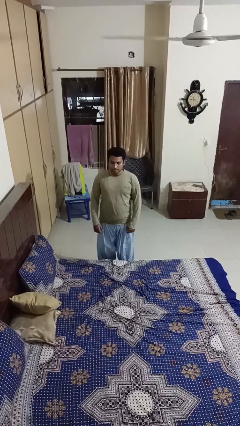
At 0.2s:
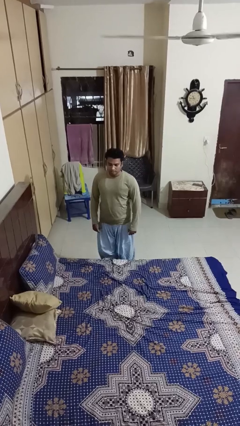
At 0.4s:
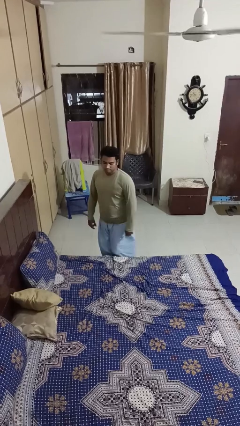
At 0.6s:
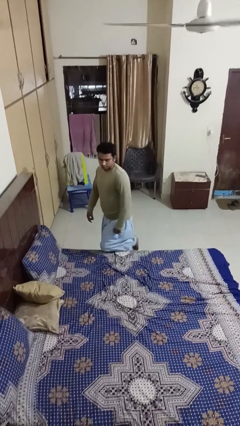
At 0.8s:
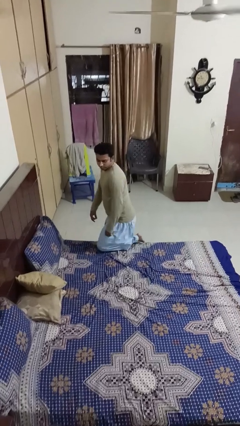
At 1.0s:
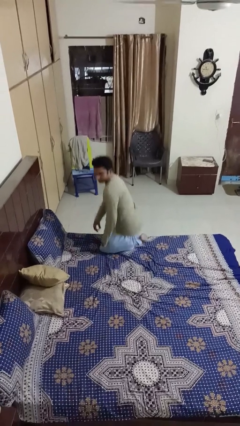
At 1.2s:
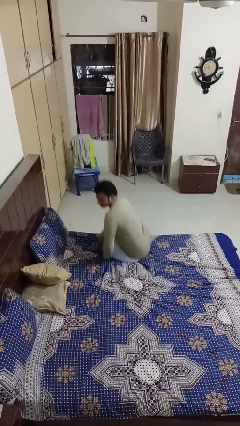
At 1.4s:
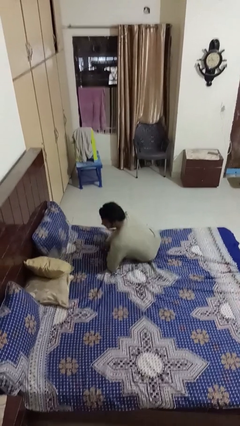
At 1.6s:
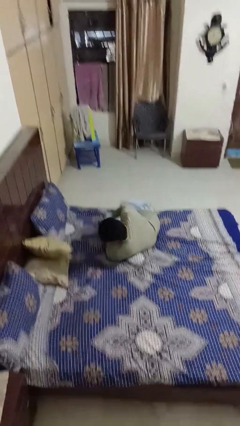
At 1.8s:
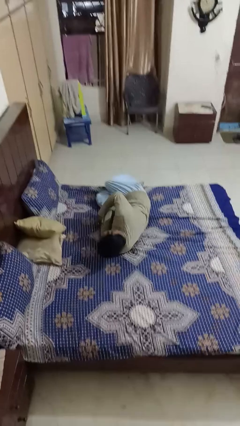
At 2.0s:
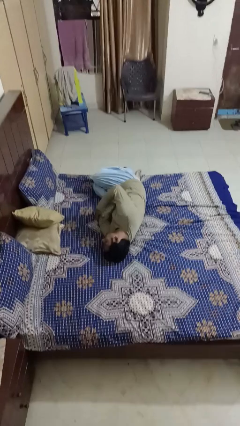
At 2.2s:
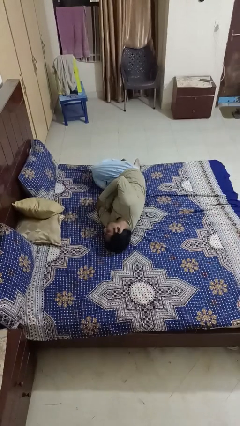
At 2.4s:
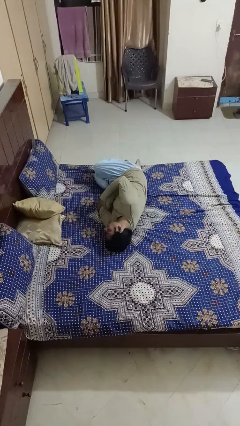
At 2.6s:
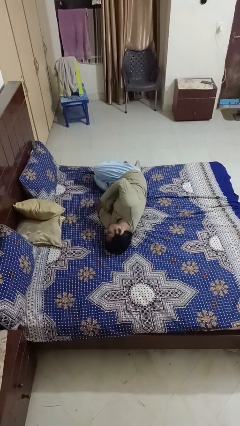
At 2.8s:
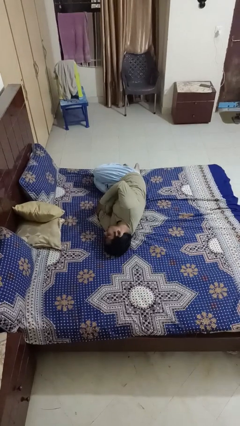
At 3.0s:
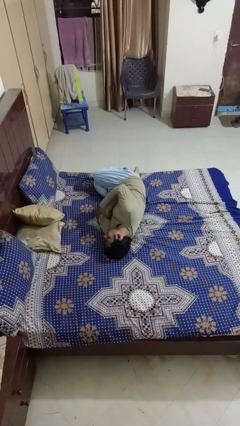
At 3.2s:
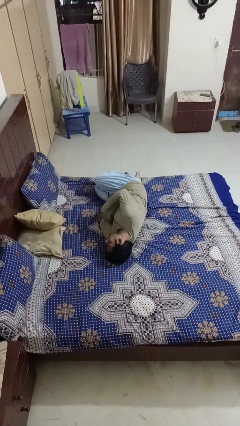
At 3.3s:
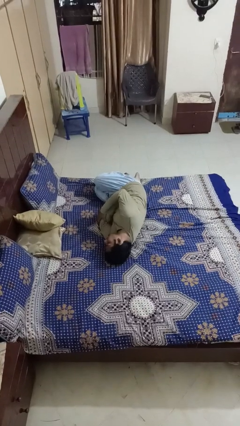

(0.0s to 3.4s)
person lies down on bed

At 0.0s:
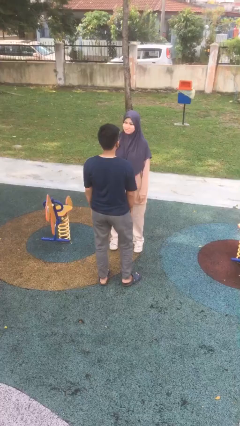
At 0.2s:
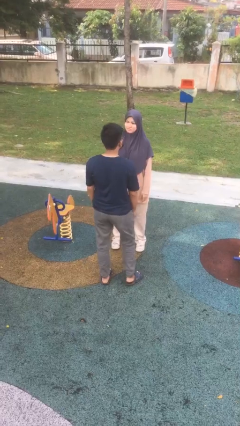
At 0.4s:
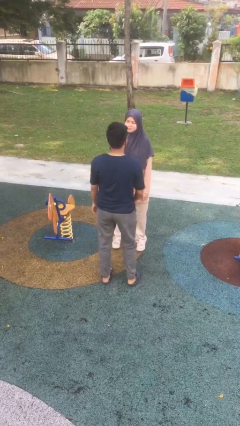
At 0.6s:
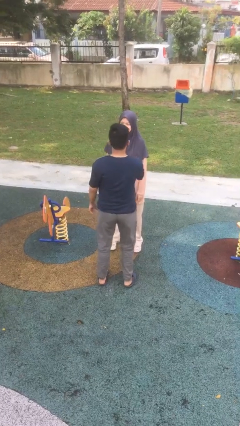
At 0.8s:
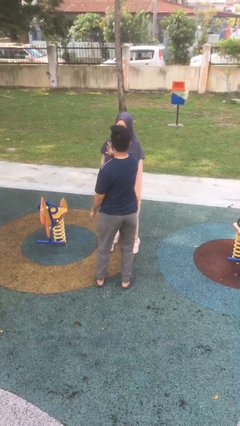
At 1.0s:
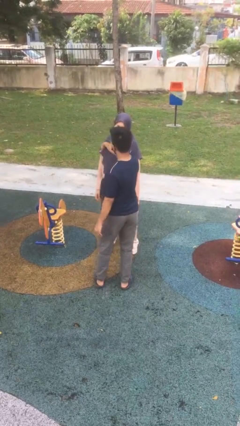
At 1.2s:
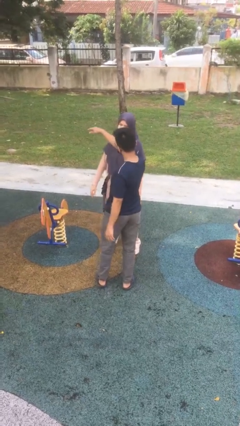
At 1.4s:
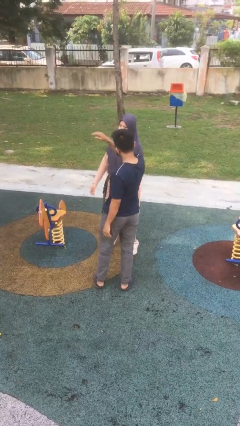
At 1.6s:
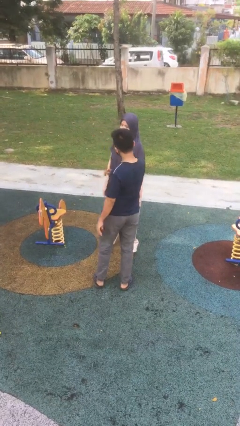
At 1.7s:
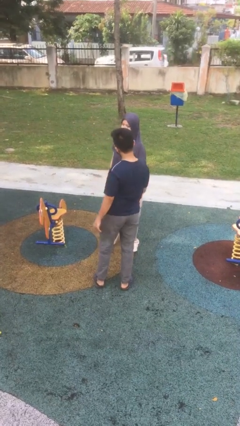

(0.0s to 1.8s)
person shoves person

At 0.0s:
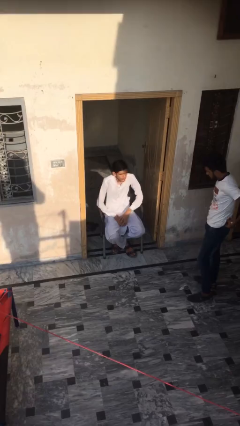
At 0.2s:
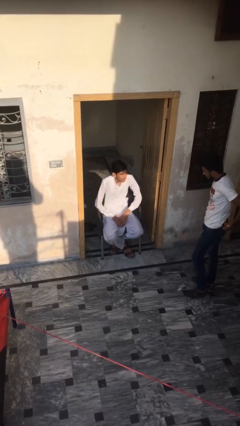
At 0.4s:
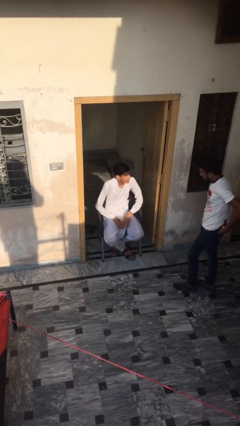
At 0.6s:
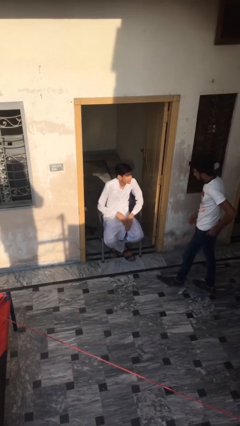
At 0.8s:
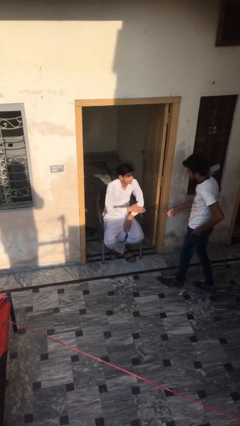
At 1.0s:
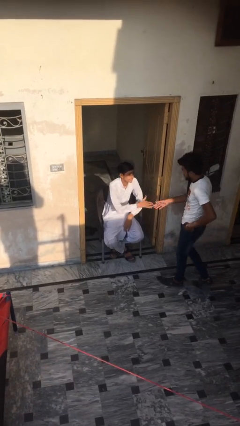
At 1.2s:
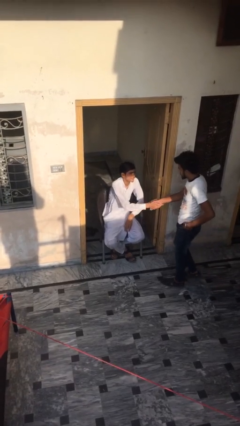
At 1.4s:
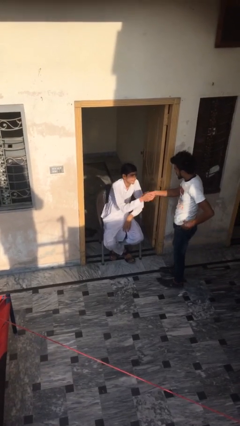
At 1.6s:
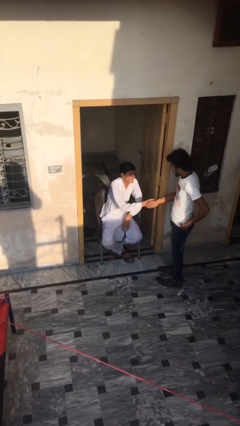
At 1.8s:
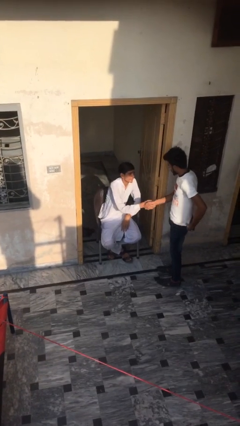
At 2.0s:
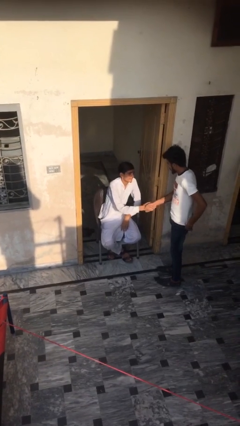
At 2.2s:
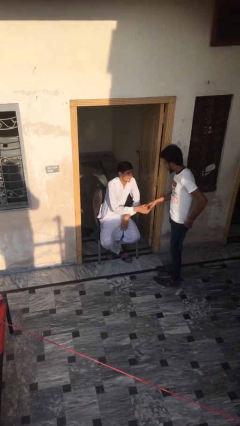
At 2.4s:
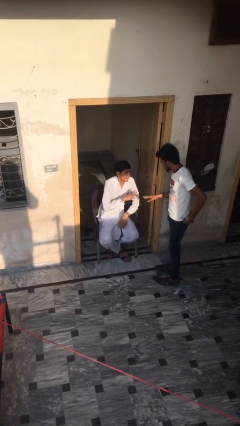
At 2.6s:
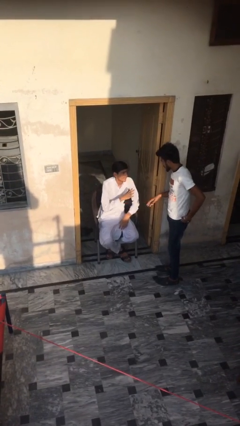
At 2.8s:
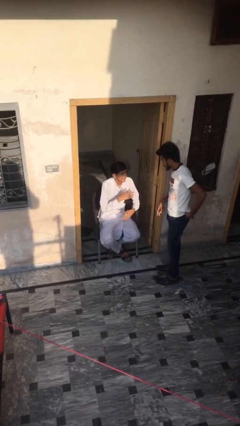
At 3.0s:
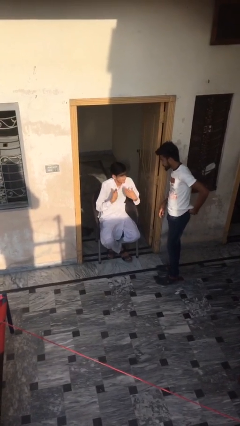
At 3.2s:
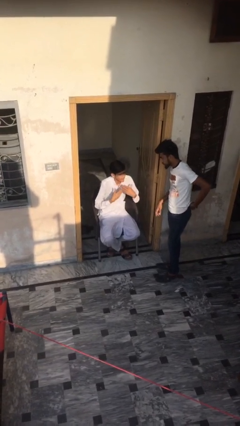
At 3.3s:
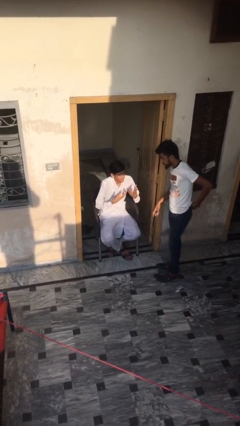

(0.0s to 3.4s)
person shakes hand

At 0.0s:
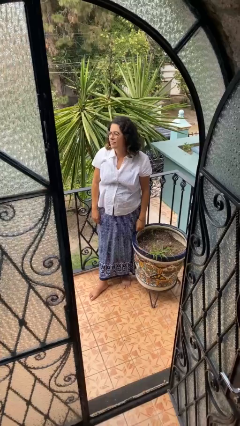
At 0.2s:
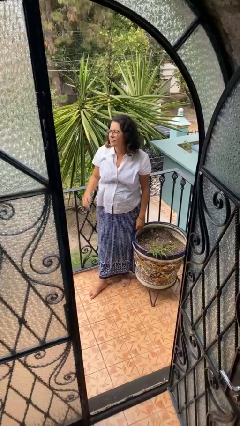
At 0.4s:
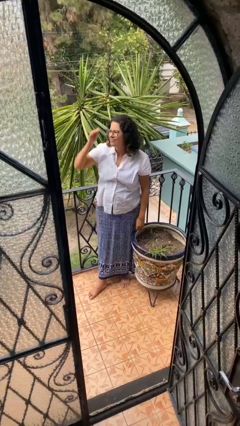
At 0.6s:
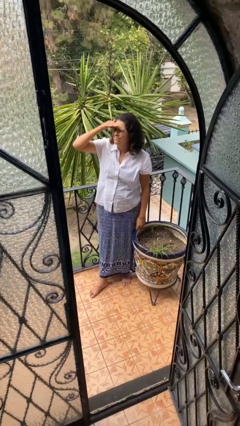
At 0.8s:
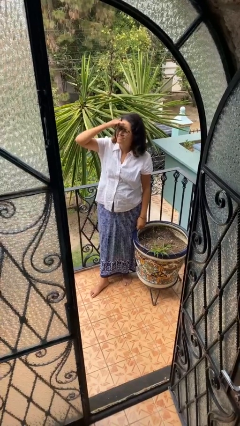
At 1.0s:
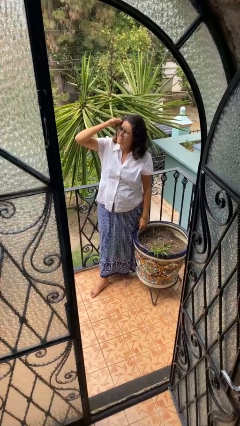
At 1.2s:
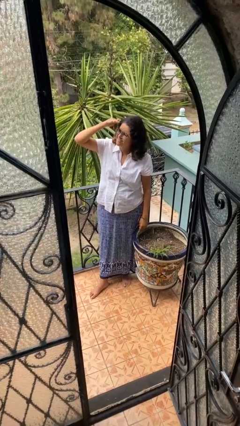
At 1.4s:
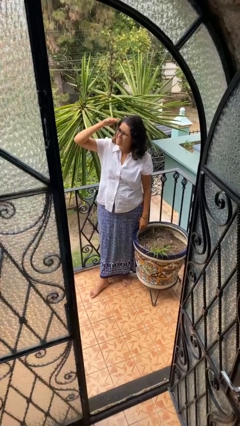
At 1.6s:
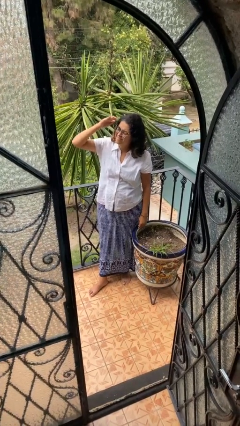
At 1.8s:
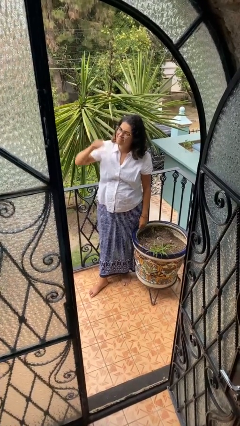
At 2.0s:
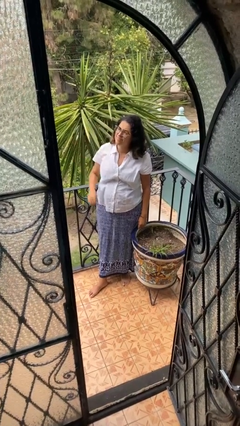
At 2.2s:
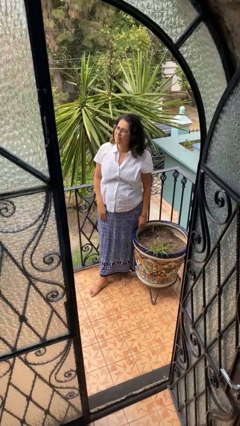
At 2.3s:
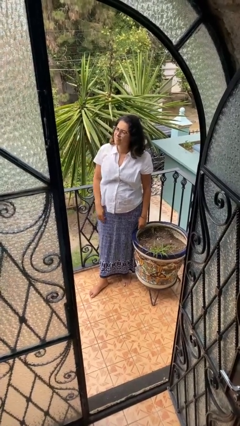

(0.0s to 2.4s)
person shades eyes

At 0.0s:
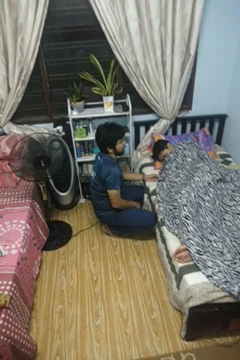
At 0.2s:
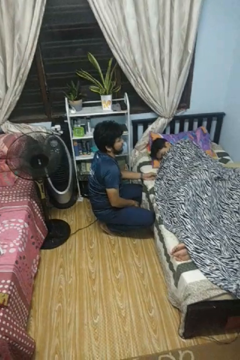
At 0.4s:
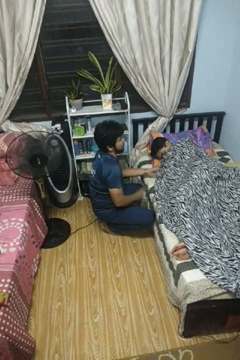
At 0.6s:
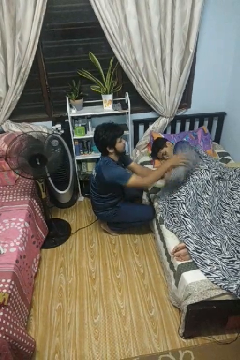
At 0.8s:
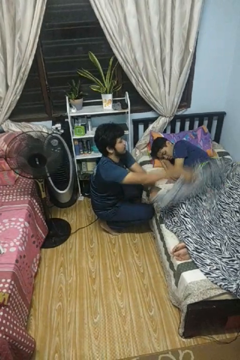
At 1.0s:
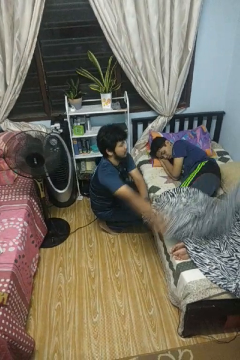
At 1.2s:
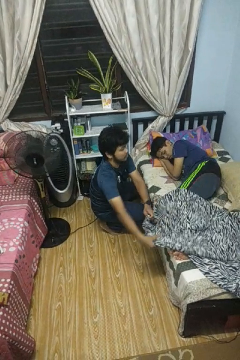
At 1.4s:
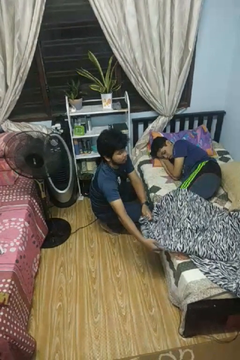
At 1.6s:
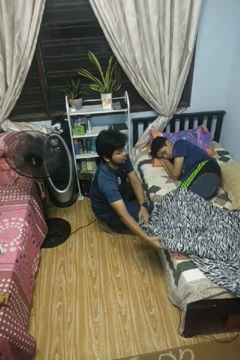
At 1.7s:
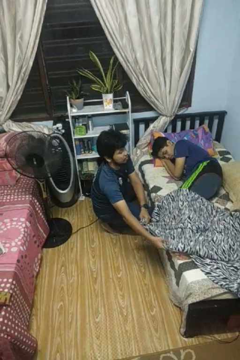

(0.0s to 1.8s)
person uncovers friend with blanket

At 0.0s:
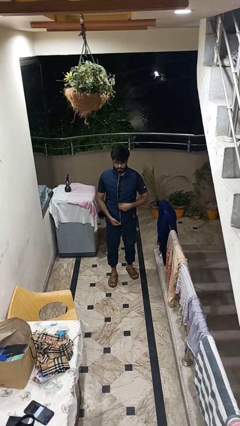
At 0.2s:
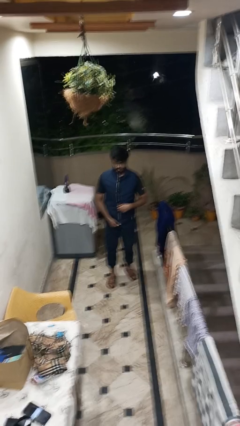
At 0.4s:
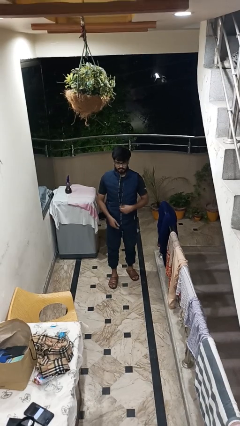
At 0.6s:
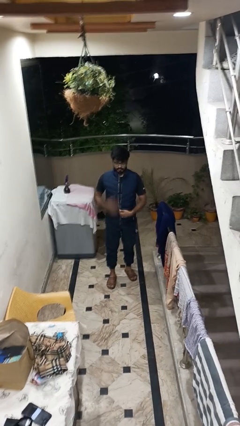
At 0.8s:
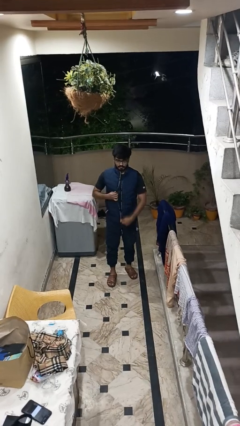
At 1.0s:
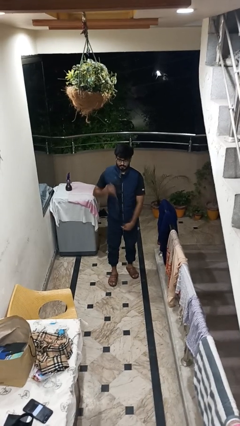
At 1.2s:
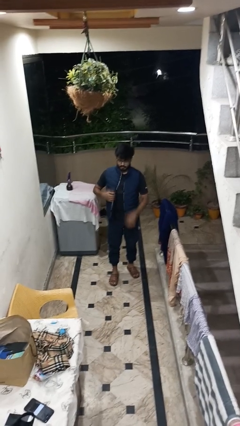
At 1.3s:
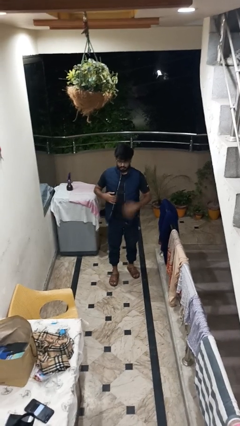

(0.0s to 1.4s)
person unzips jacket

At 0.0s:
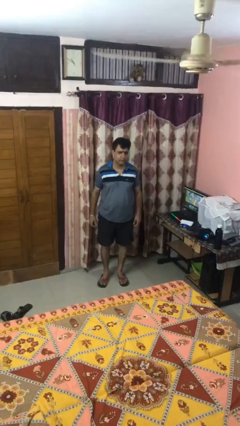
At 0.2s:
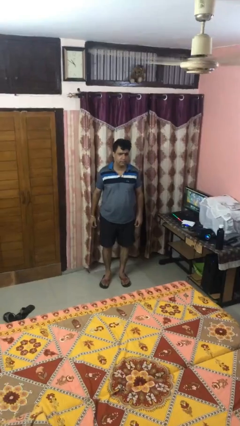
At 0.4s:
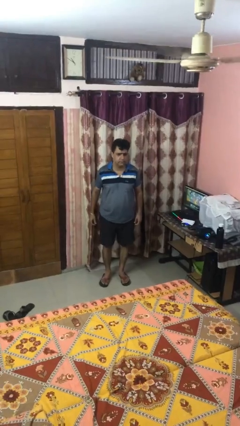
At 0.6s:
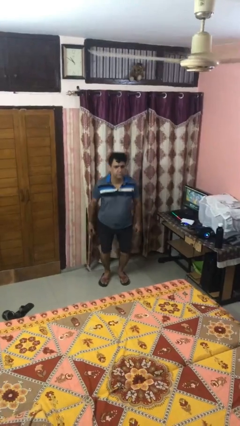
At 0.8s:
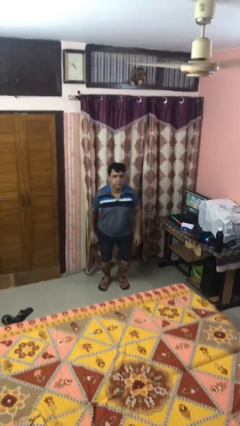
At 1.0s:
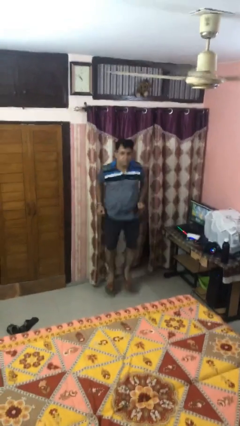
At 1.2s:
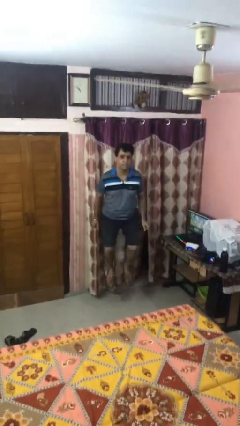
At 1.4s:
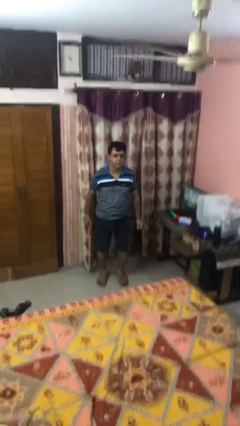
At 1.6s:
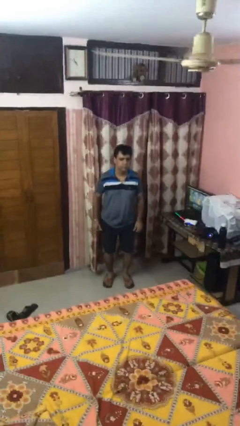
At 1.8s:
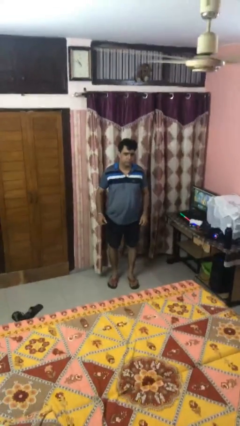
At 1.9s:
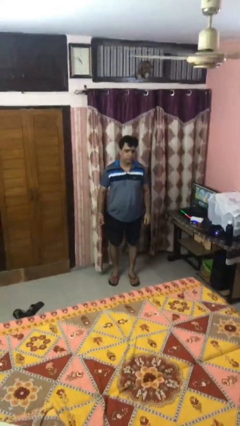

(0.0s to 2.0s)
person jumps

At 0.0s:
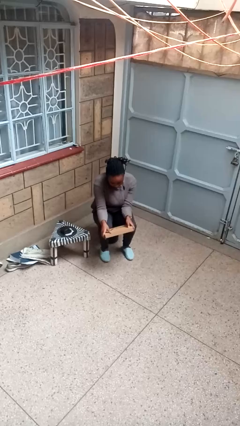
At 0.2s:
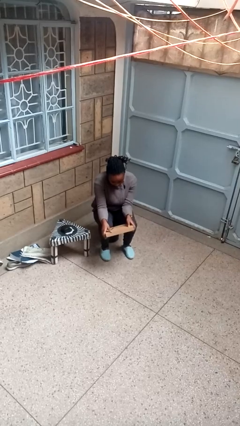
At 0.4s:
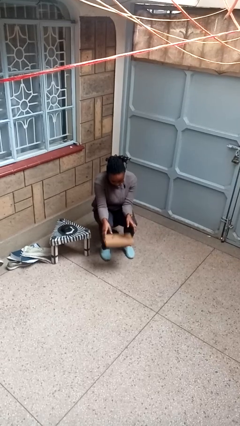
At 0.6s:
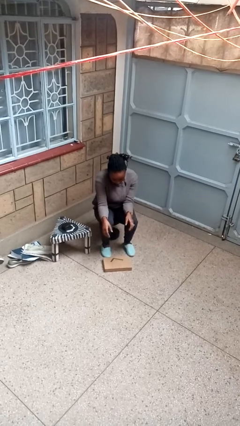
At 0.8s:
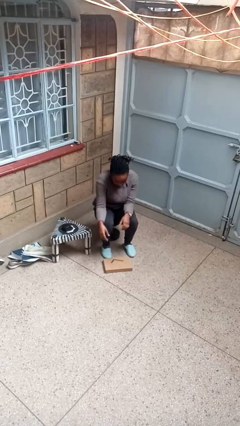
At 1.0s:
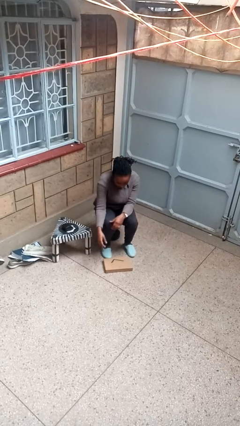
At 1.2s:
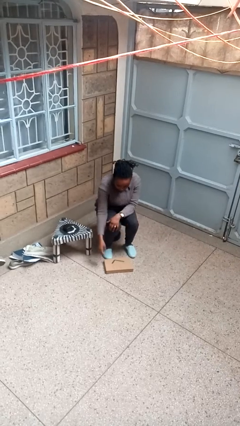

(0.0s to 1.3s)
person drops object
